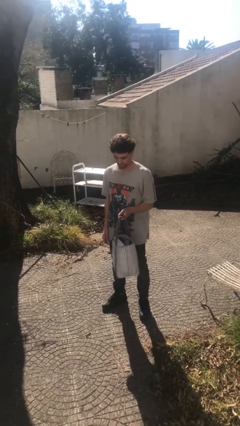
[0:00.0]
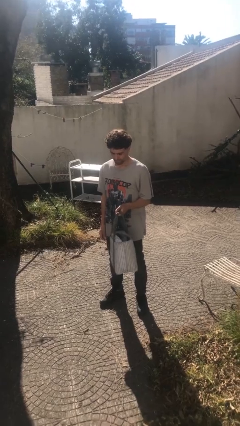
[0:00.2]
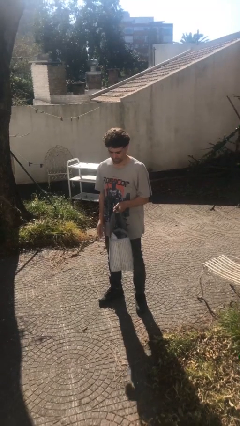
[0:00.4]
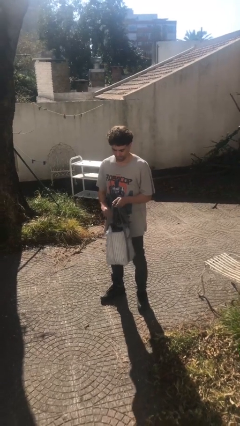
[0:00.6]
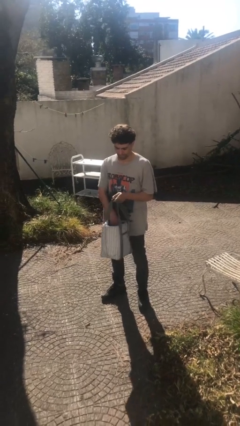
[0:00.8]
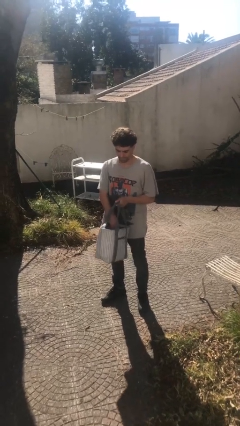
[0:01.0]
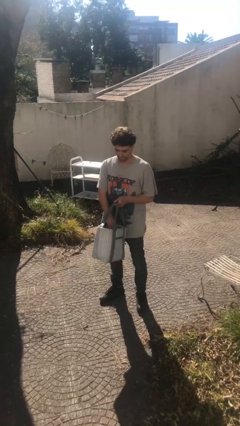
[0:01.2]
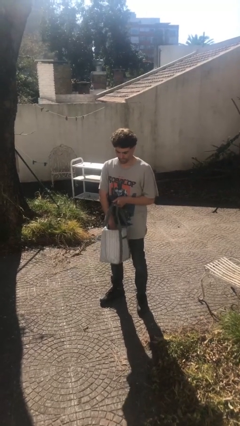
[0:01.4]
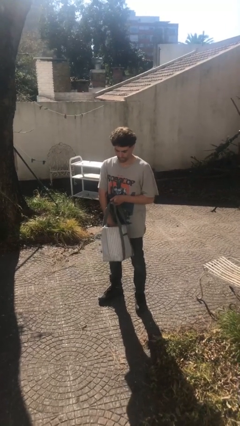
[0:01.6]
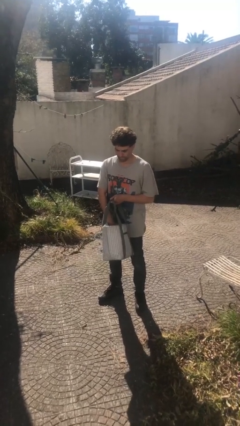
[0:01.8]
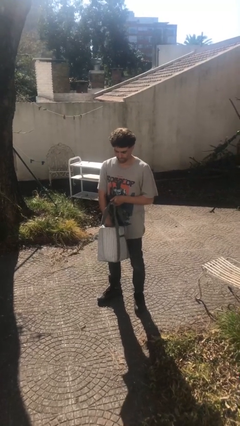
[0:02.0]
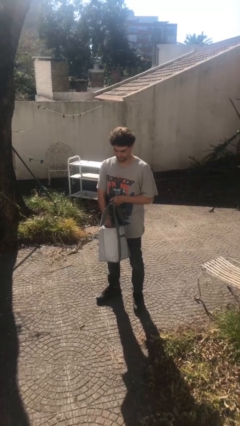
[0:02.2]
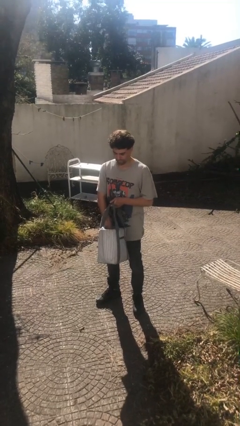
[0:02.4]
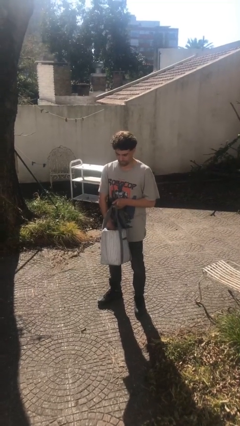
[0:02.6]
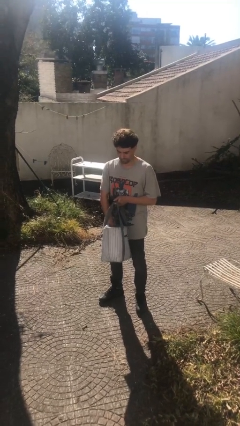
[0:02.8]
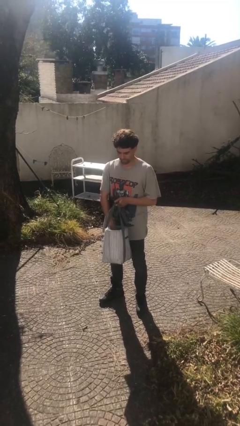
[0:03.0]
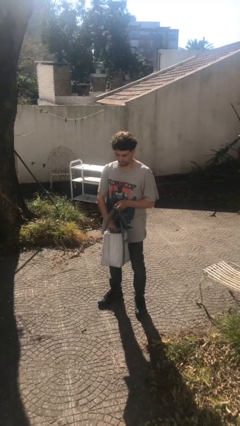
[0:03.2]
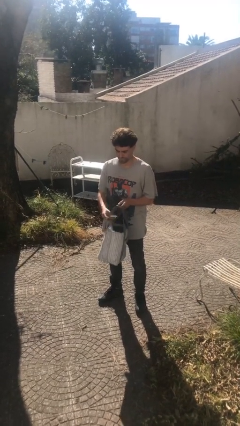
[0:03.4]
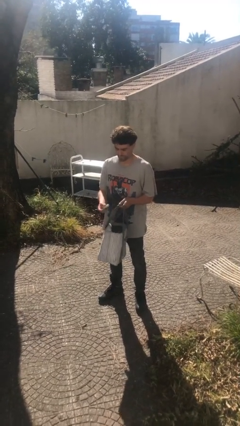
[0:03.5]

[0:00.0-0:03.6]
person searches in purse

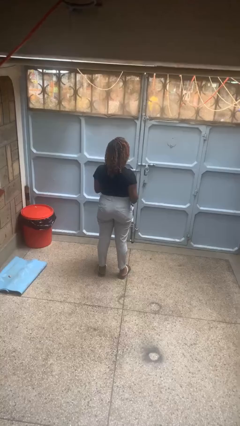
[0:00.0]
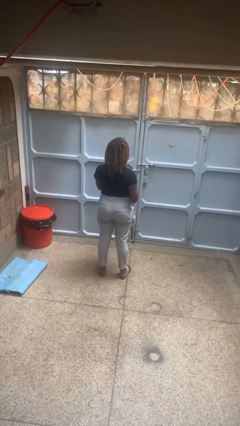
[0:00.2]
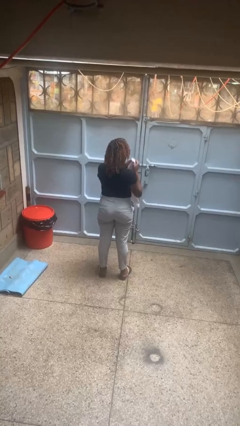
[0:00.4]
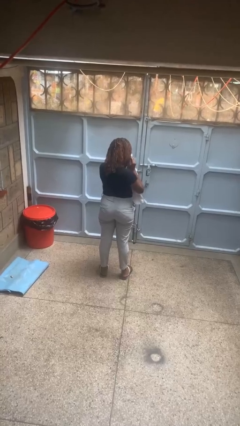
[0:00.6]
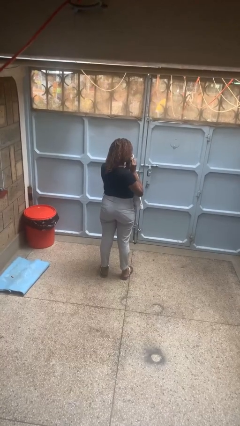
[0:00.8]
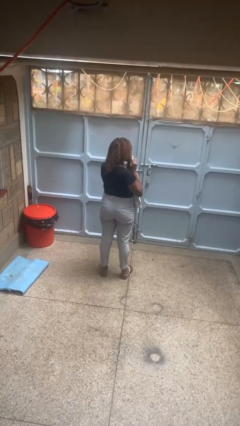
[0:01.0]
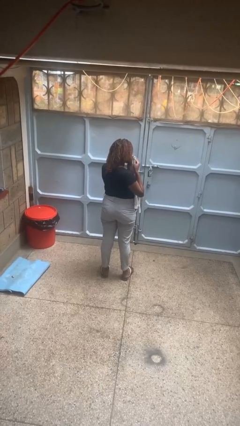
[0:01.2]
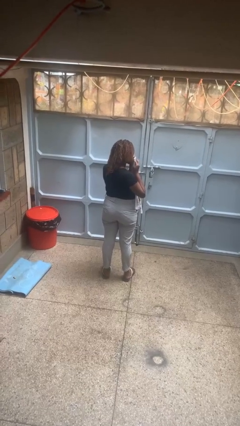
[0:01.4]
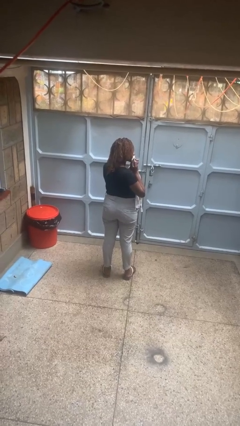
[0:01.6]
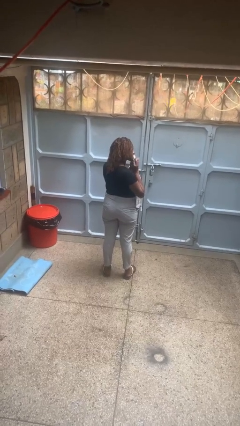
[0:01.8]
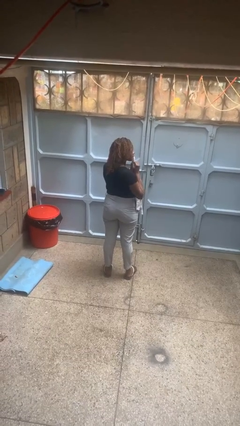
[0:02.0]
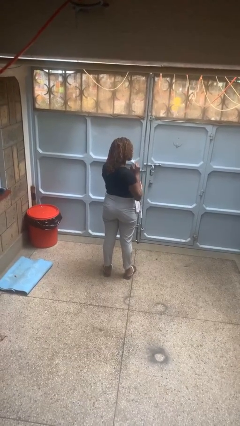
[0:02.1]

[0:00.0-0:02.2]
person wipes mouth with napkin

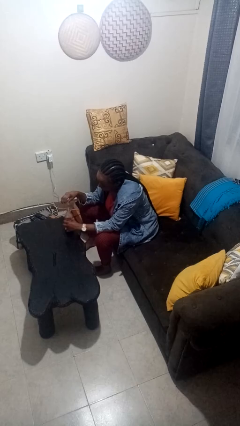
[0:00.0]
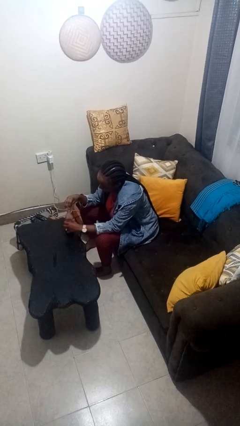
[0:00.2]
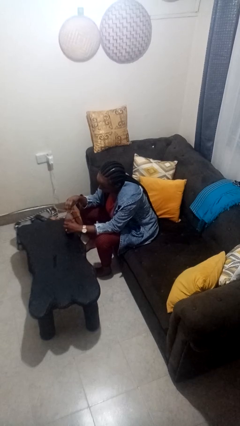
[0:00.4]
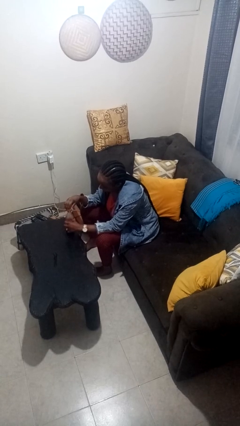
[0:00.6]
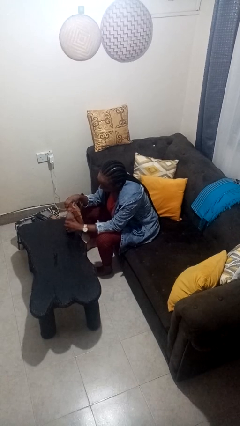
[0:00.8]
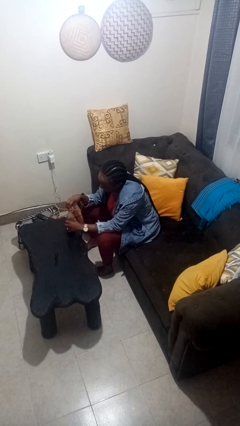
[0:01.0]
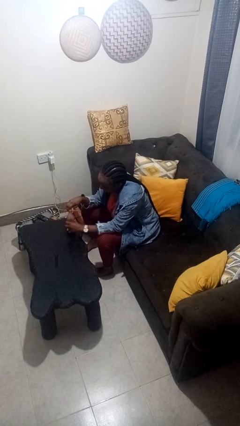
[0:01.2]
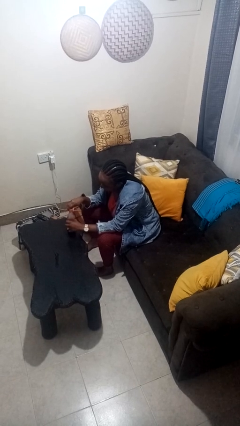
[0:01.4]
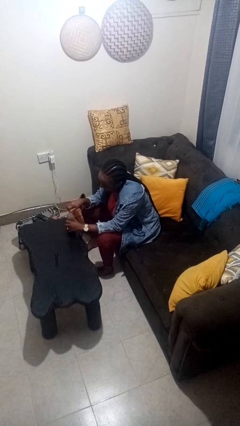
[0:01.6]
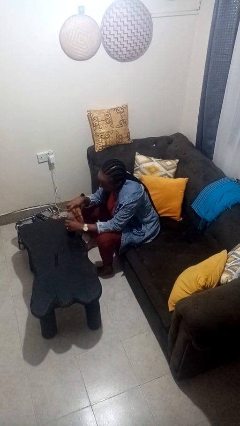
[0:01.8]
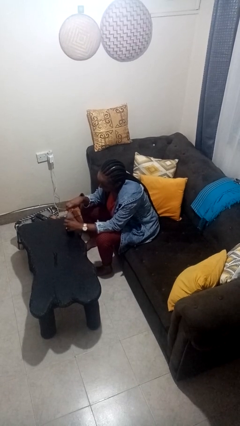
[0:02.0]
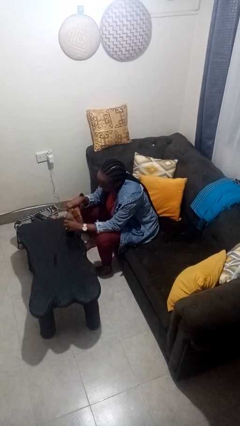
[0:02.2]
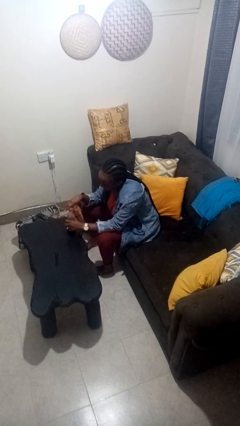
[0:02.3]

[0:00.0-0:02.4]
person screws lid to bottle

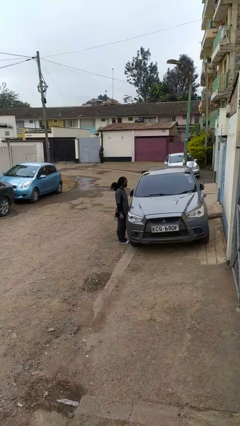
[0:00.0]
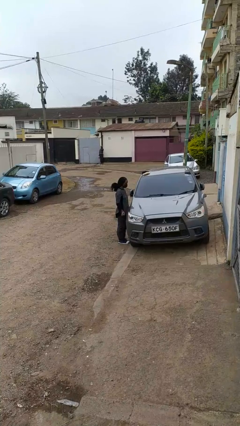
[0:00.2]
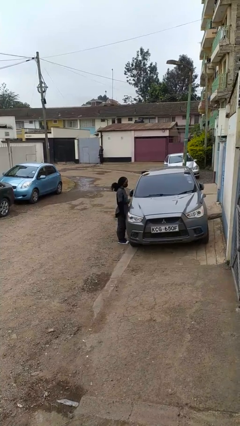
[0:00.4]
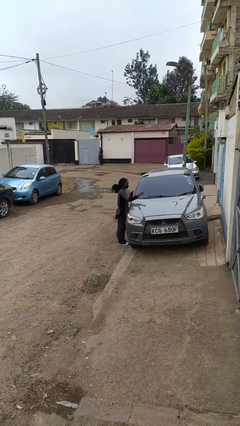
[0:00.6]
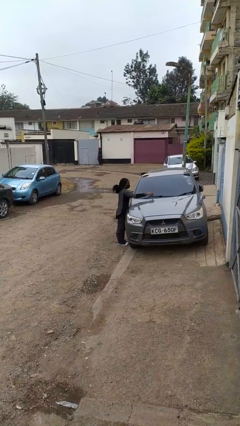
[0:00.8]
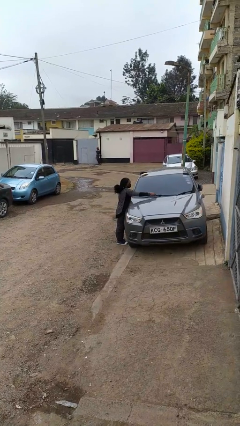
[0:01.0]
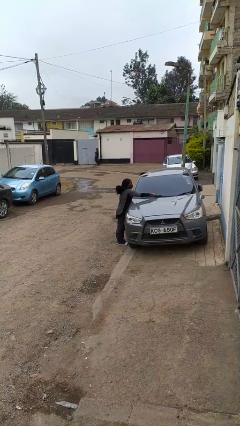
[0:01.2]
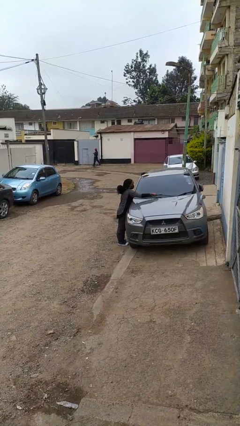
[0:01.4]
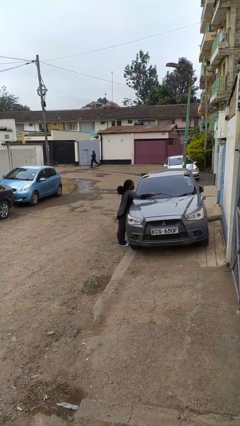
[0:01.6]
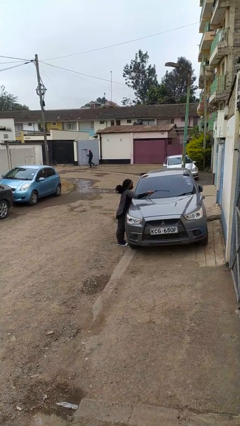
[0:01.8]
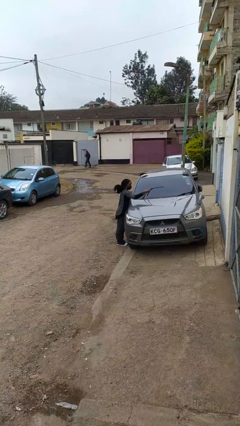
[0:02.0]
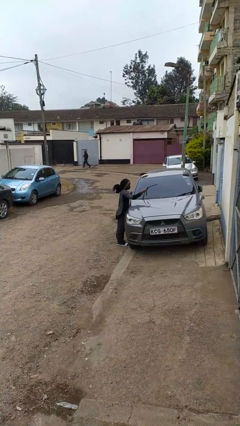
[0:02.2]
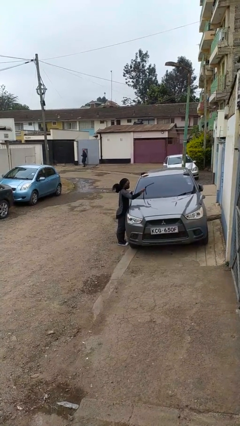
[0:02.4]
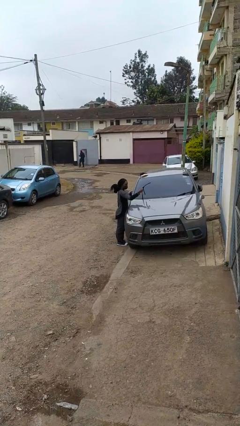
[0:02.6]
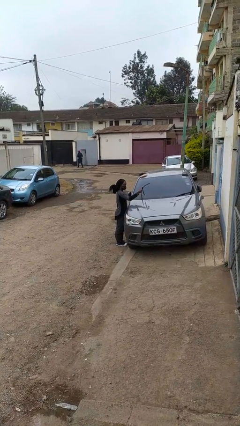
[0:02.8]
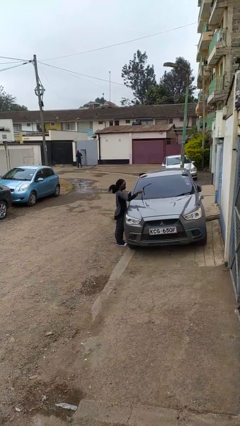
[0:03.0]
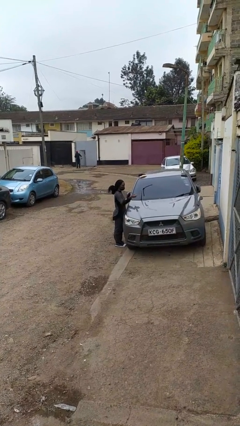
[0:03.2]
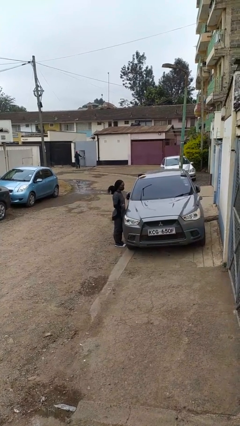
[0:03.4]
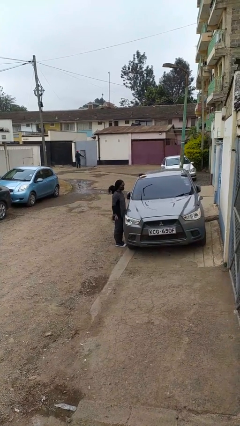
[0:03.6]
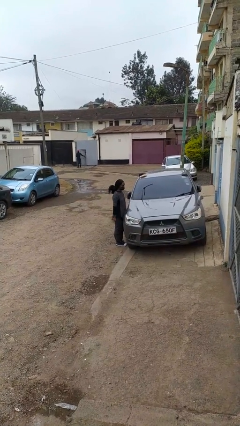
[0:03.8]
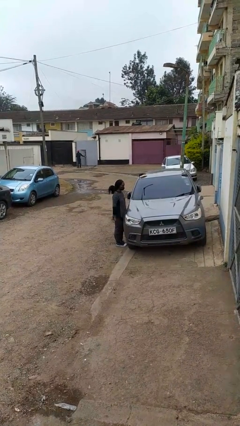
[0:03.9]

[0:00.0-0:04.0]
person picks up object from couch

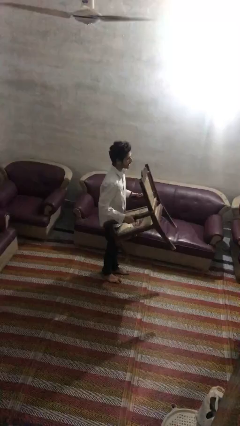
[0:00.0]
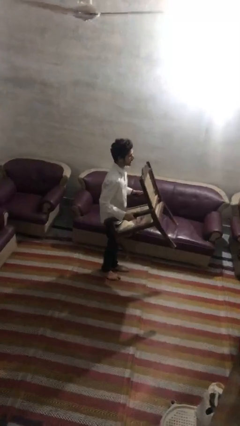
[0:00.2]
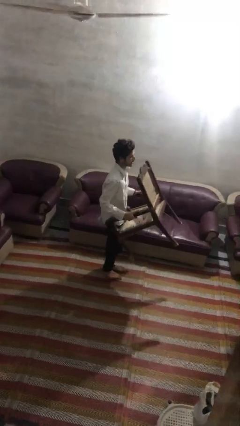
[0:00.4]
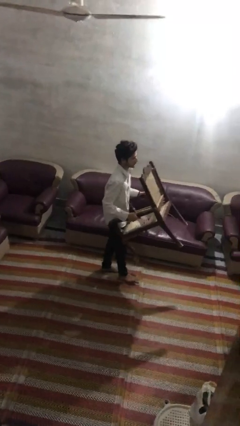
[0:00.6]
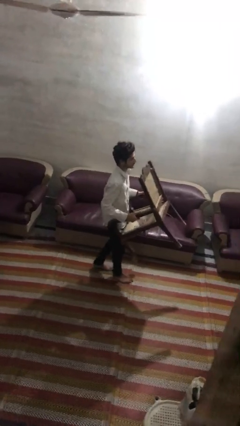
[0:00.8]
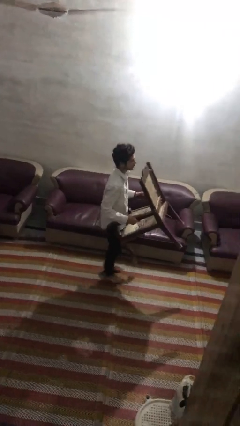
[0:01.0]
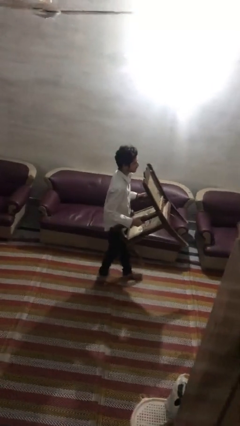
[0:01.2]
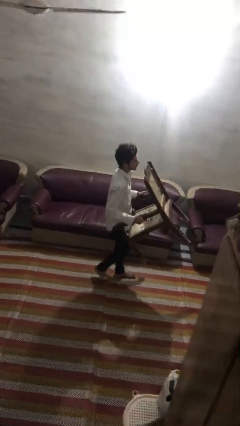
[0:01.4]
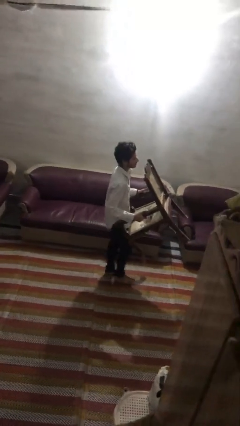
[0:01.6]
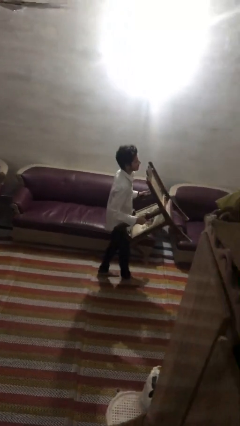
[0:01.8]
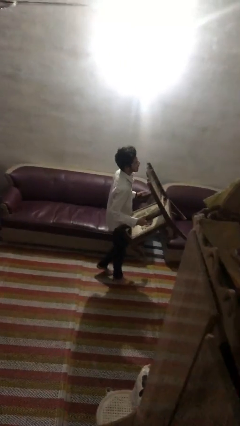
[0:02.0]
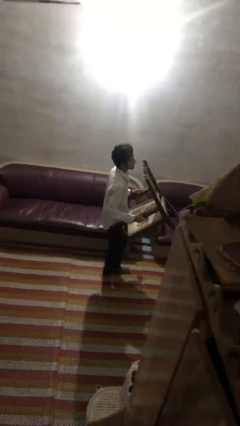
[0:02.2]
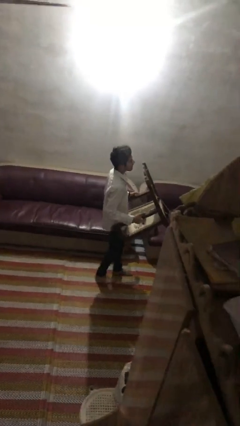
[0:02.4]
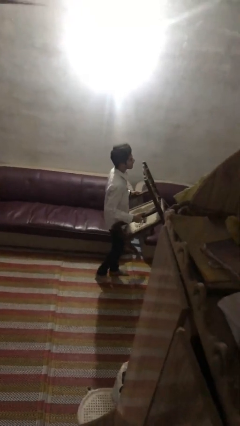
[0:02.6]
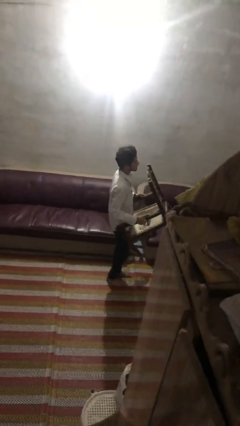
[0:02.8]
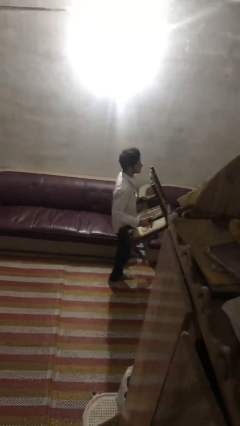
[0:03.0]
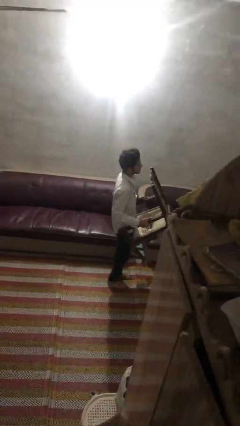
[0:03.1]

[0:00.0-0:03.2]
person carries furniture

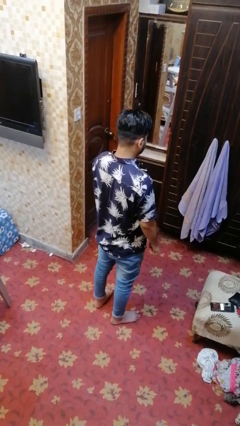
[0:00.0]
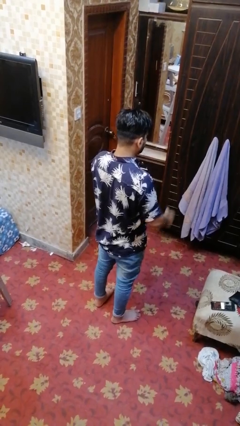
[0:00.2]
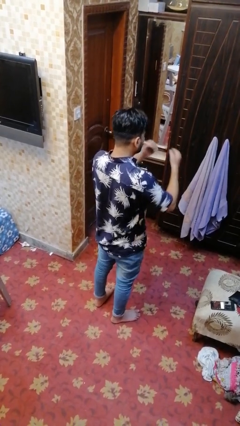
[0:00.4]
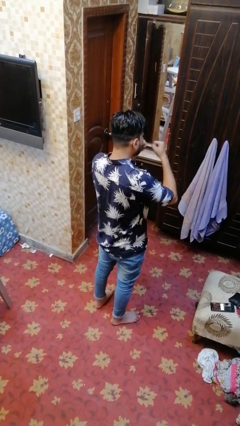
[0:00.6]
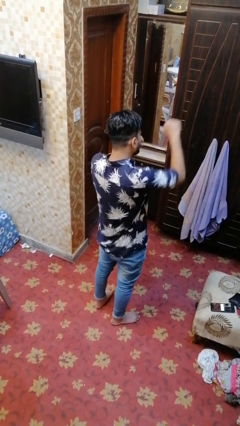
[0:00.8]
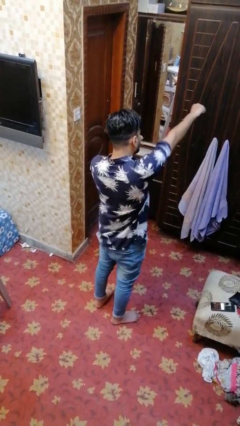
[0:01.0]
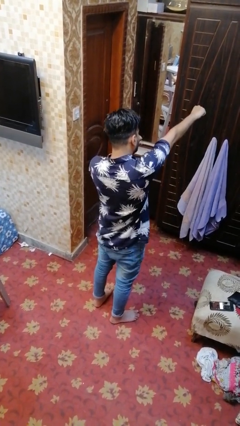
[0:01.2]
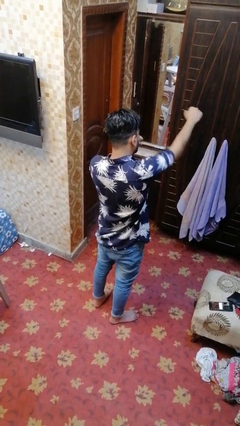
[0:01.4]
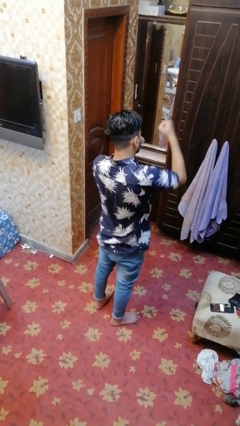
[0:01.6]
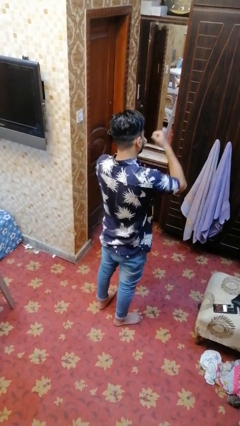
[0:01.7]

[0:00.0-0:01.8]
person punches
